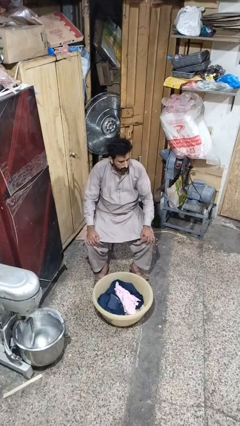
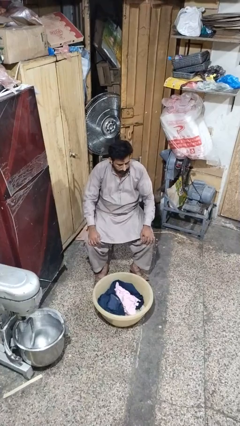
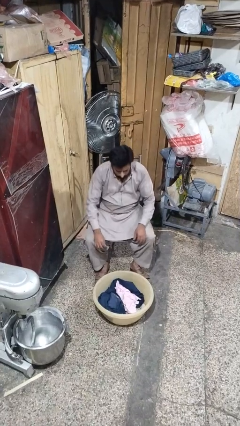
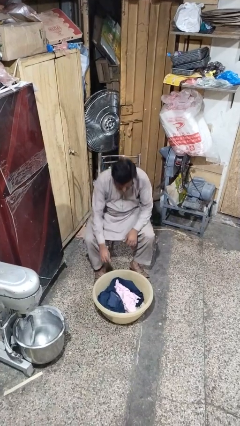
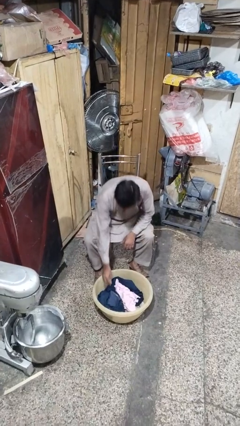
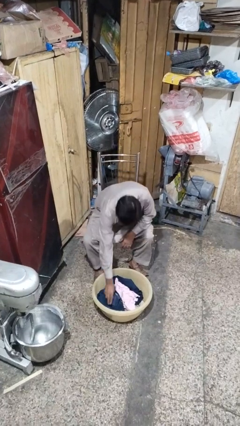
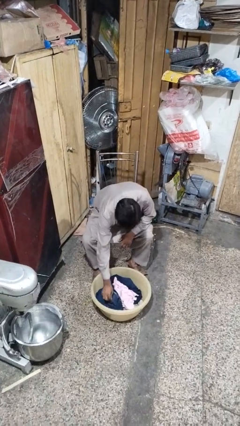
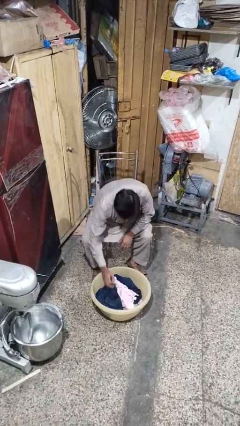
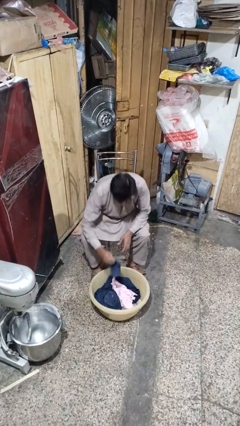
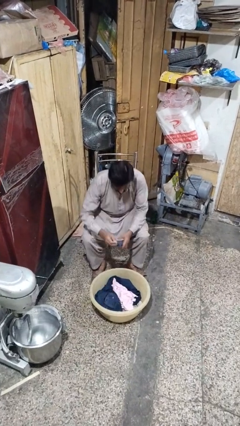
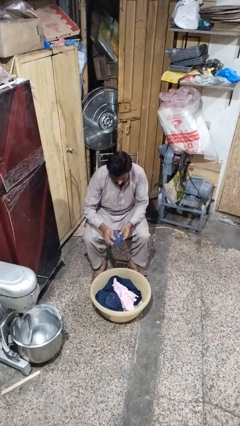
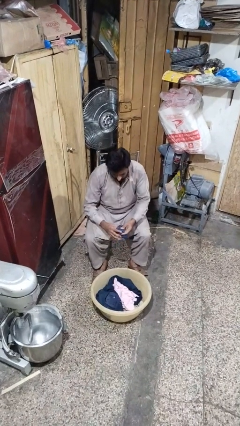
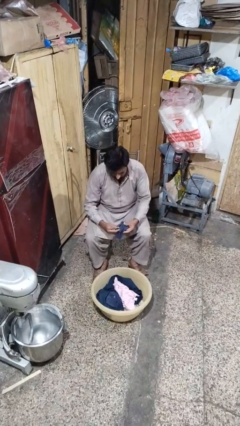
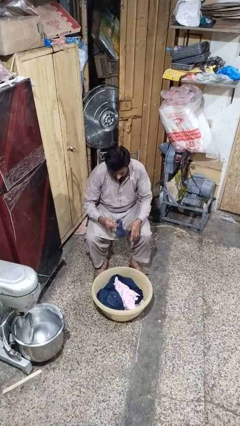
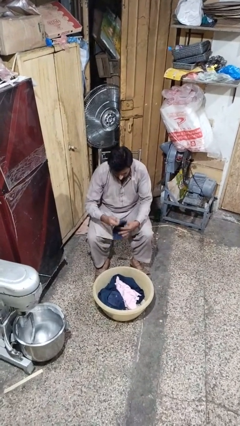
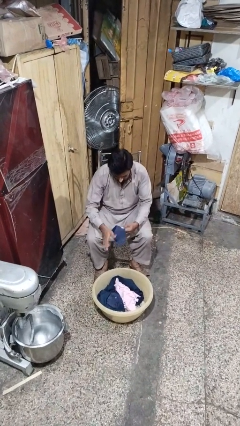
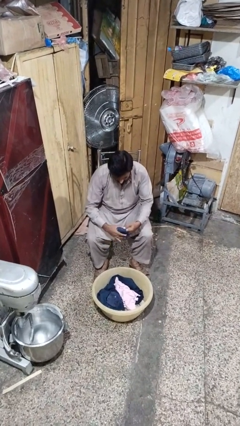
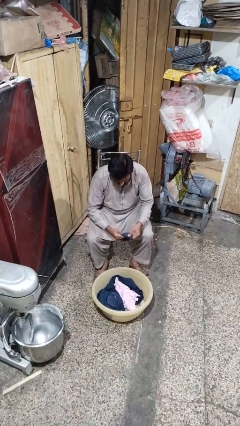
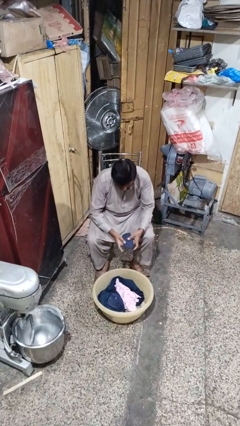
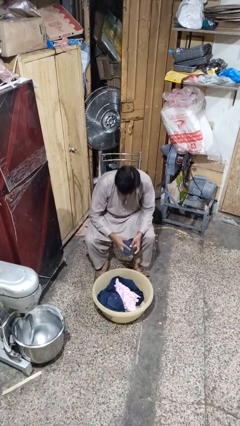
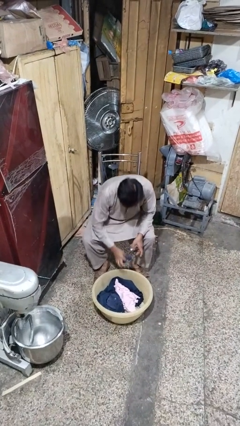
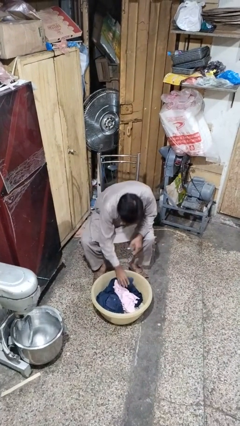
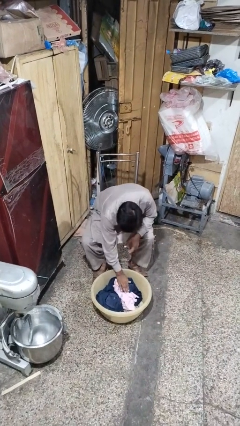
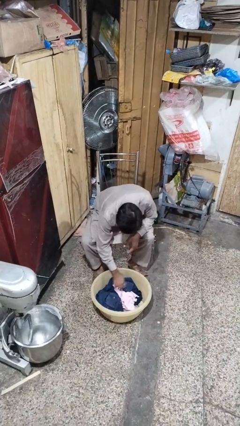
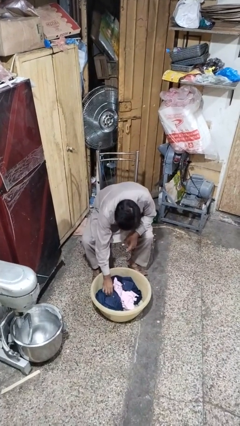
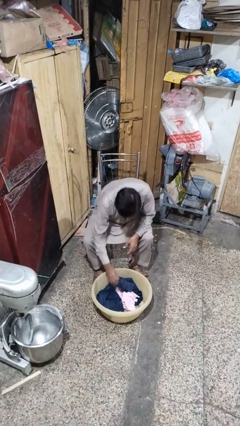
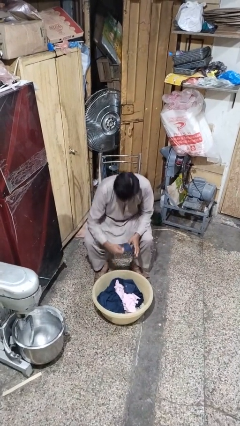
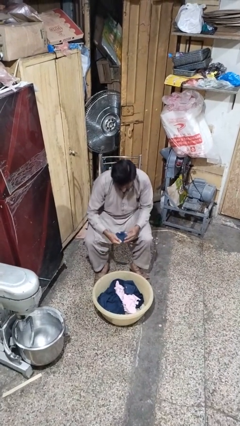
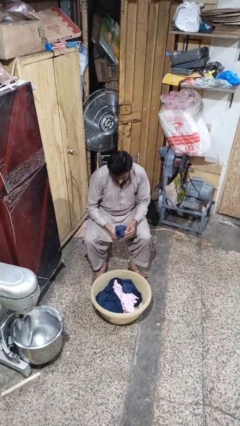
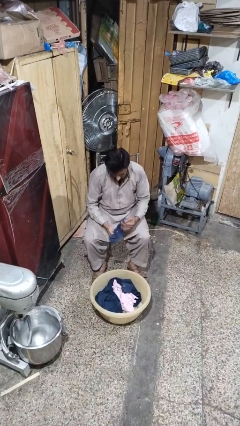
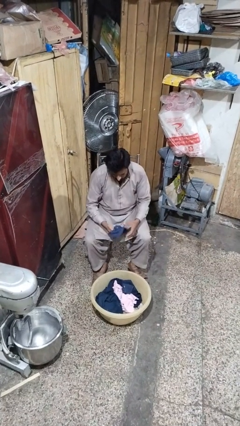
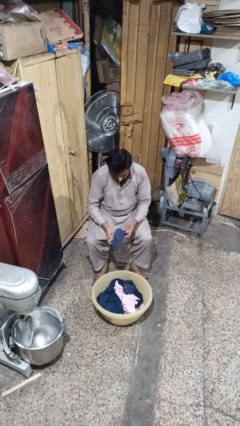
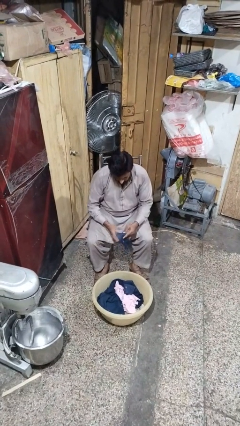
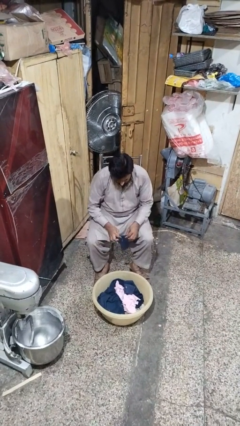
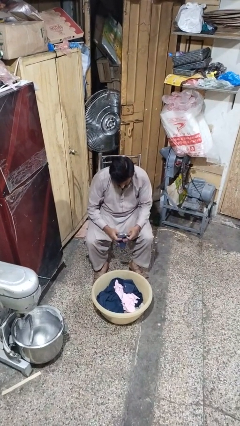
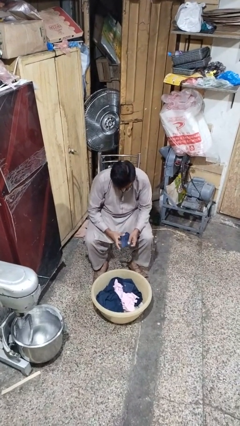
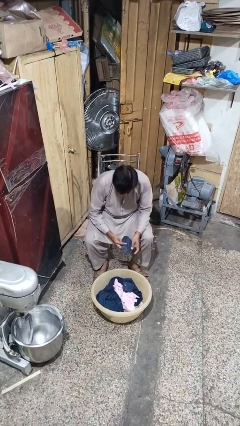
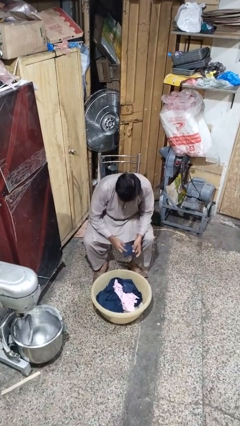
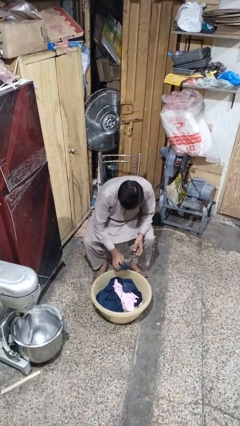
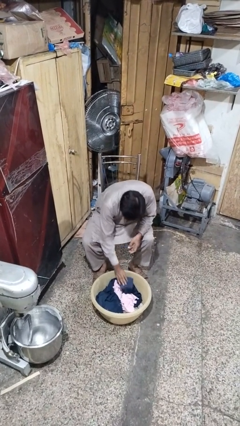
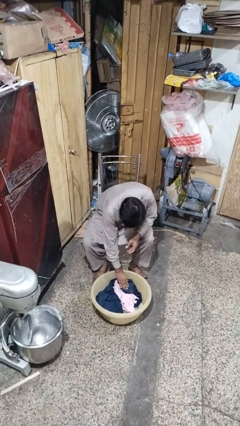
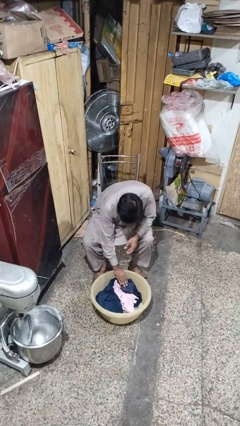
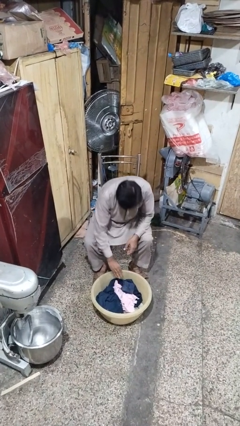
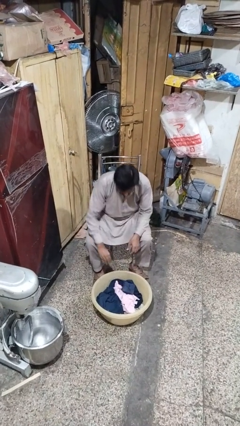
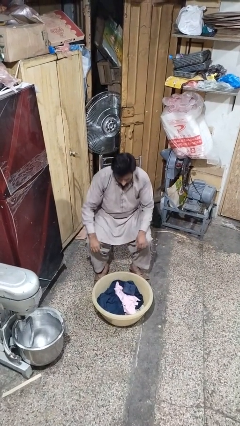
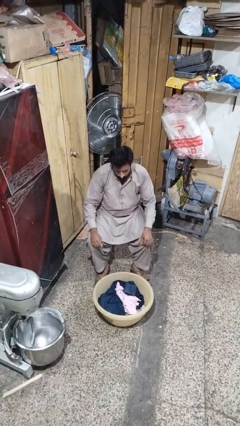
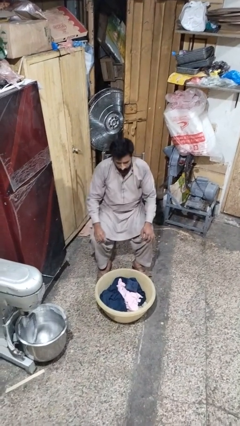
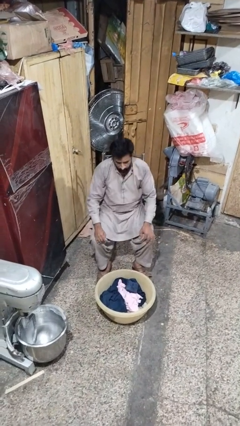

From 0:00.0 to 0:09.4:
person folds socks

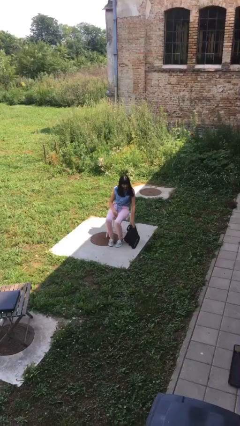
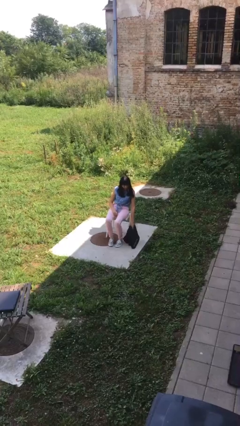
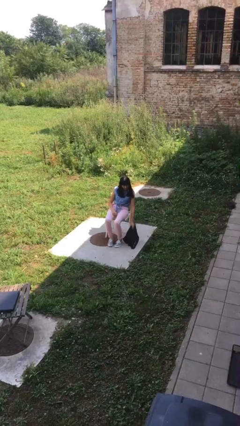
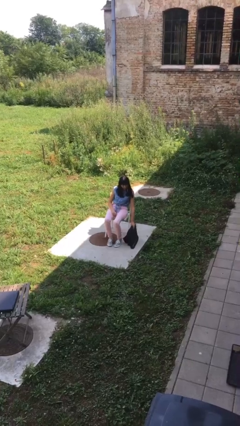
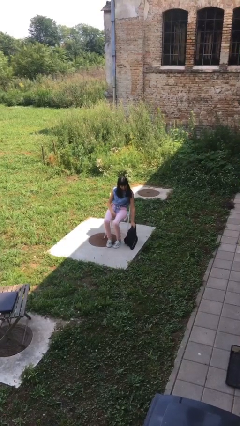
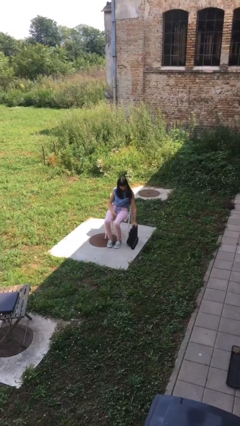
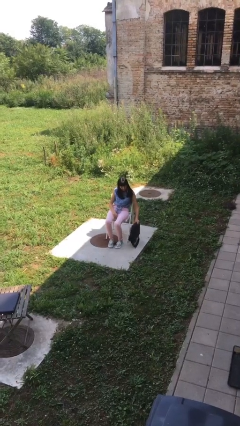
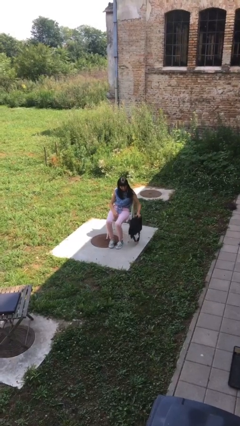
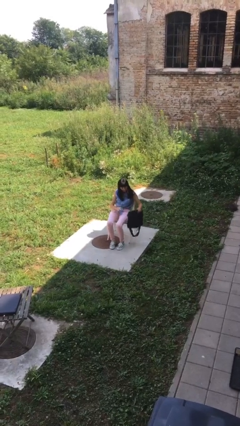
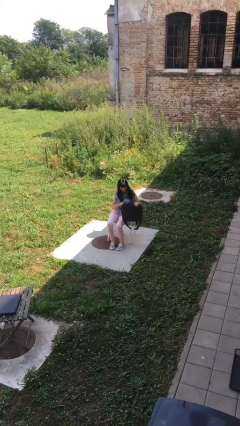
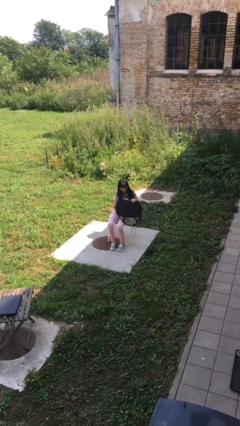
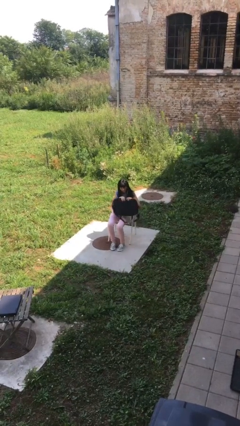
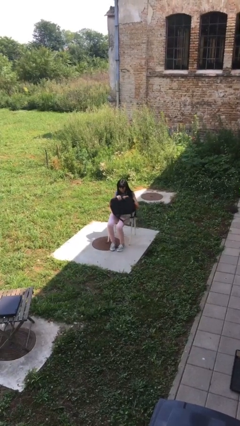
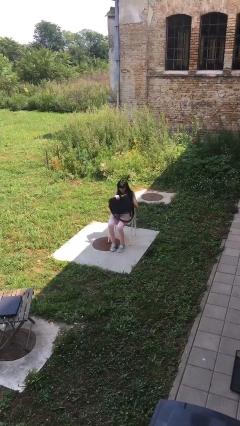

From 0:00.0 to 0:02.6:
person picks up object from floor

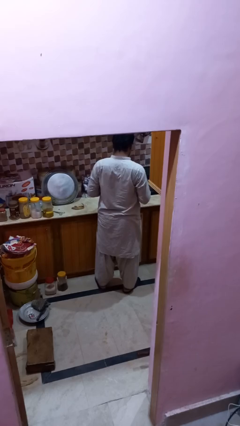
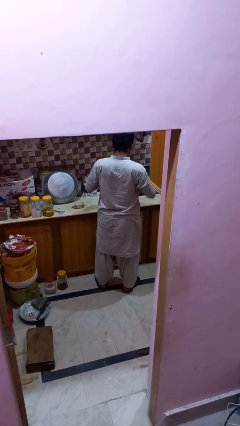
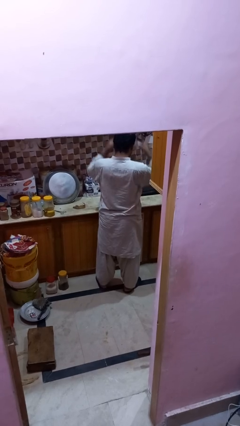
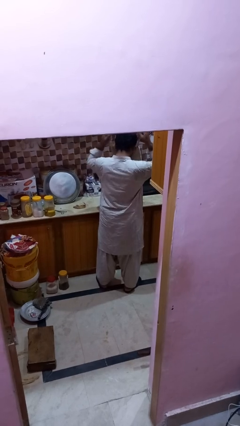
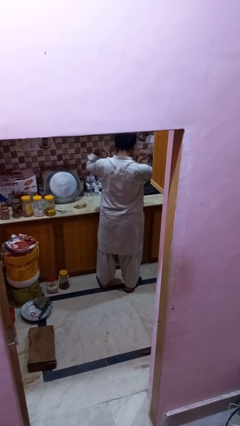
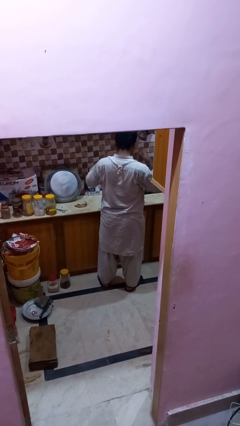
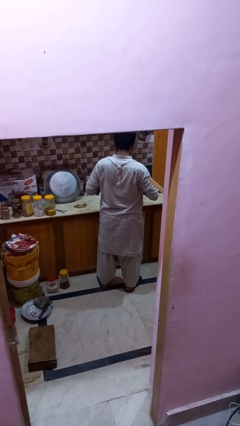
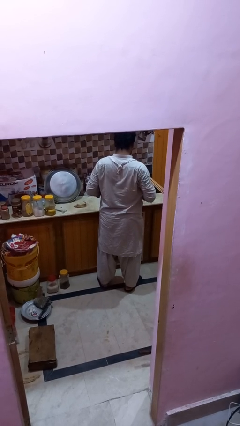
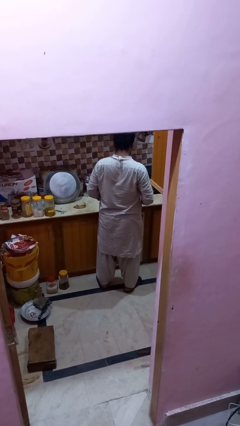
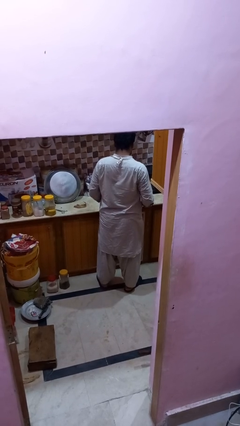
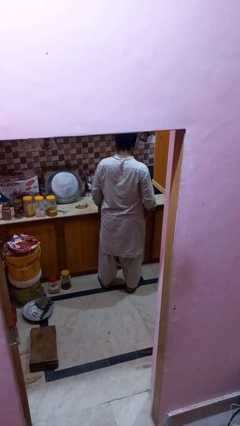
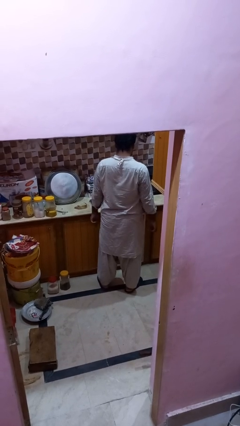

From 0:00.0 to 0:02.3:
person puts on apron

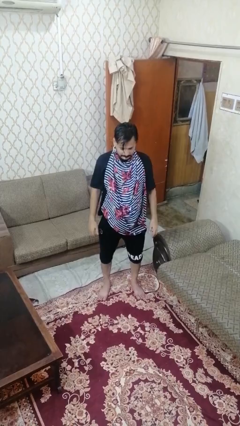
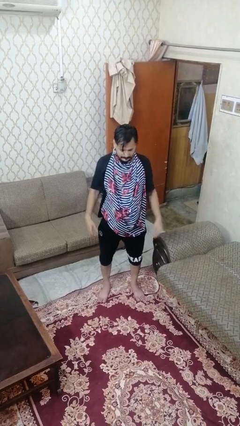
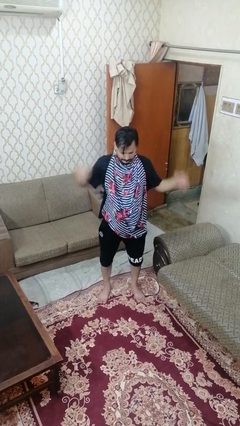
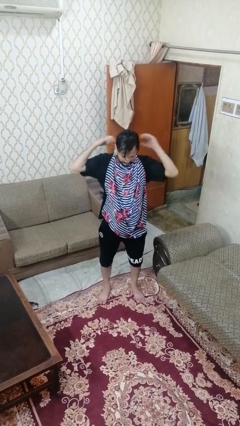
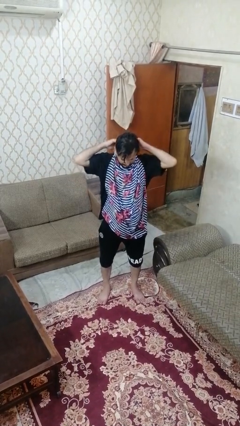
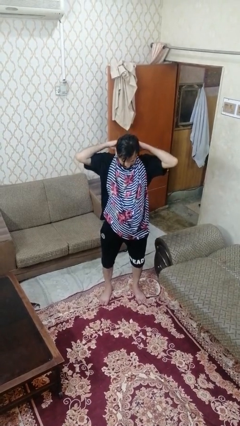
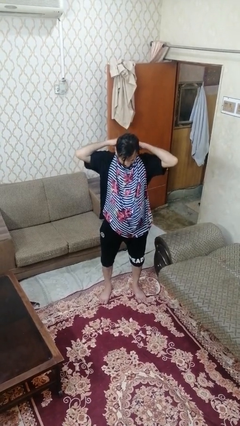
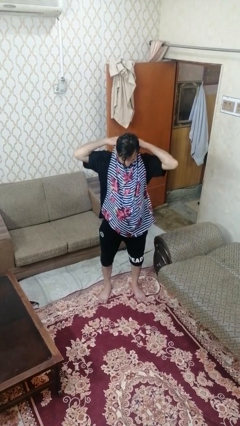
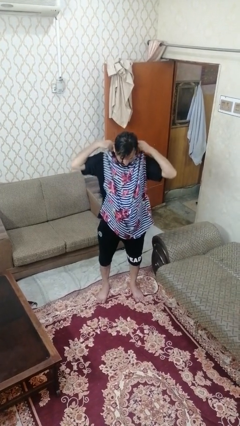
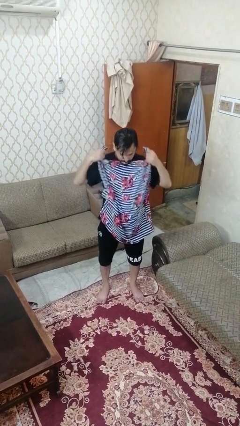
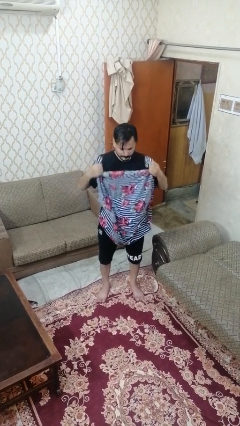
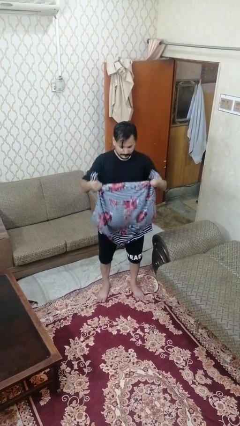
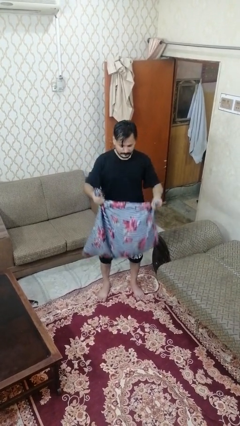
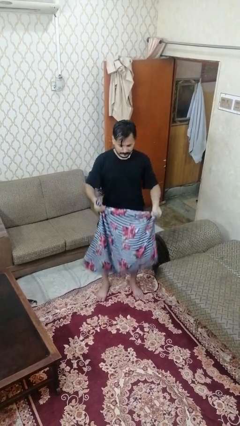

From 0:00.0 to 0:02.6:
person takes off apron

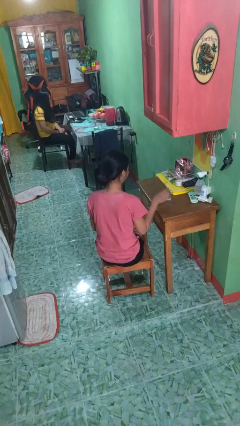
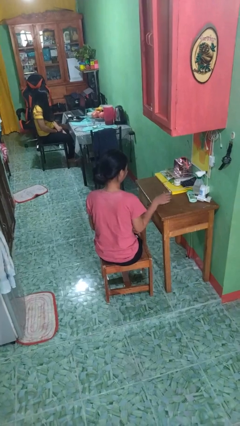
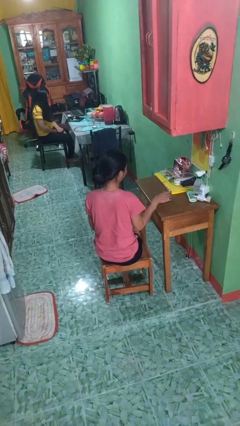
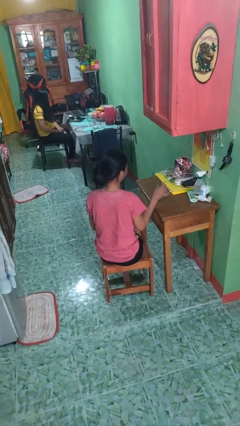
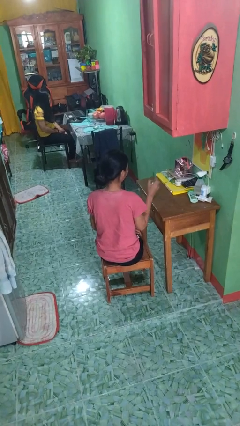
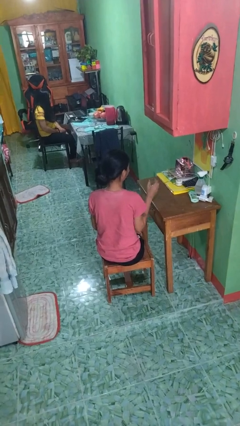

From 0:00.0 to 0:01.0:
person picks up object from table

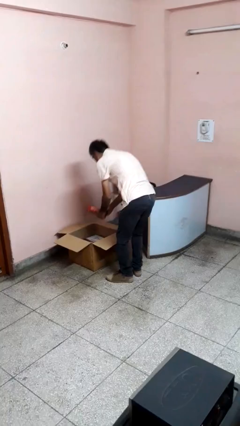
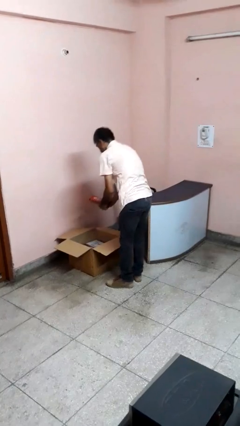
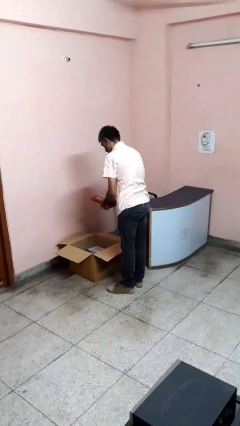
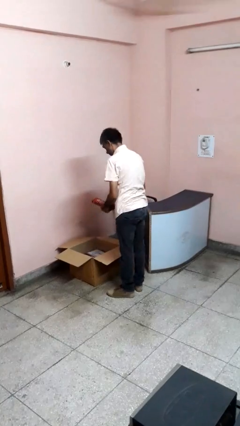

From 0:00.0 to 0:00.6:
person takes object from box
